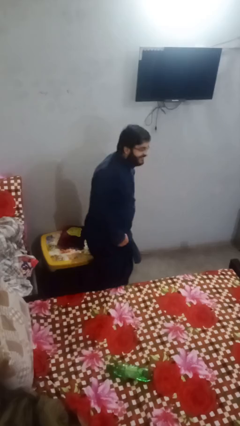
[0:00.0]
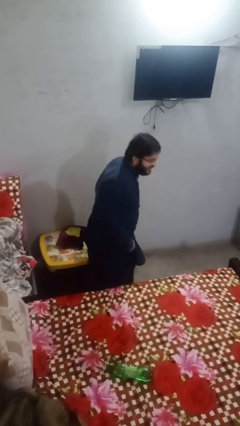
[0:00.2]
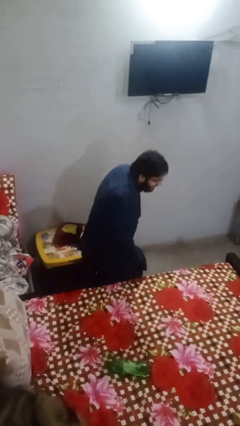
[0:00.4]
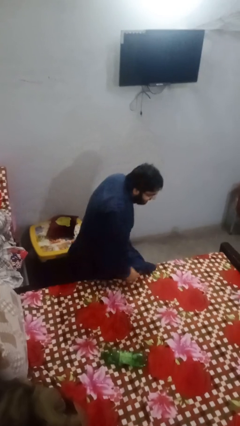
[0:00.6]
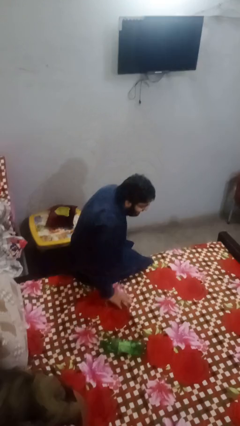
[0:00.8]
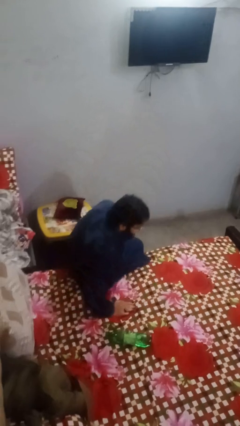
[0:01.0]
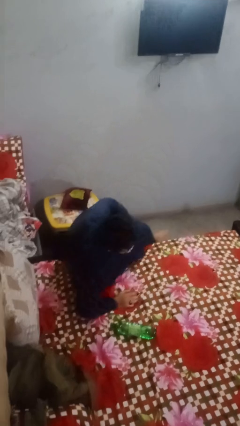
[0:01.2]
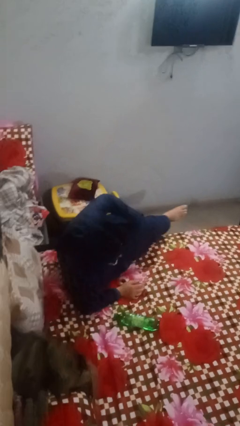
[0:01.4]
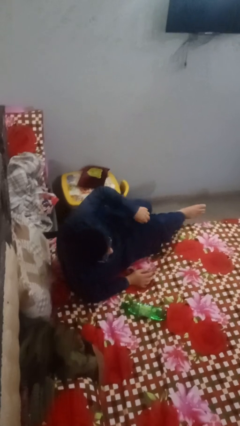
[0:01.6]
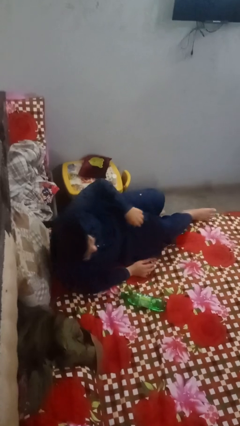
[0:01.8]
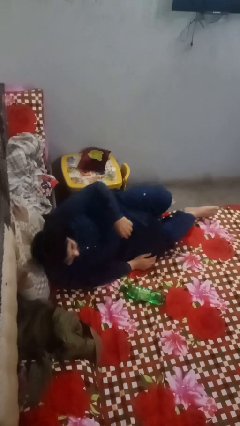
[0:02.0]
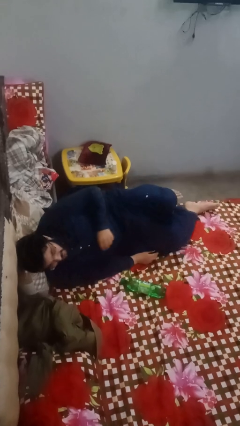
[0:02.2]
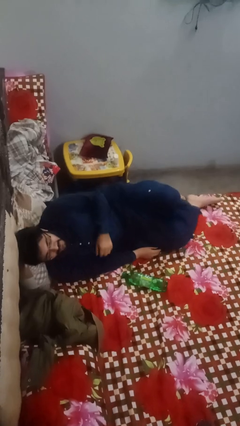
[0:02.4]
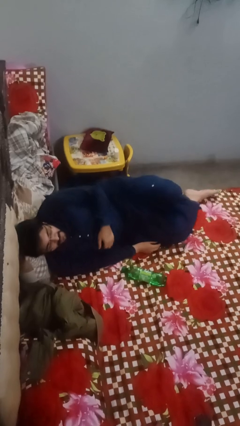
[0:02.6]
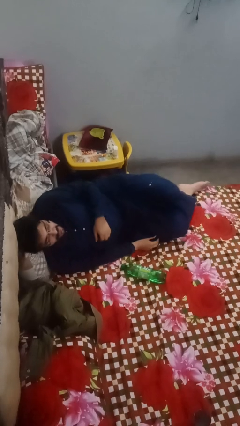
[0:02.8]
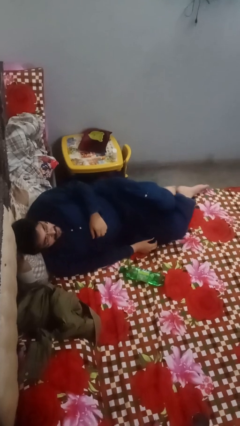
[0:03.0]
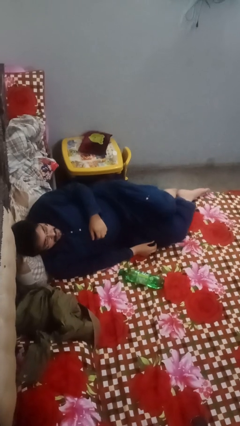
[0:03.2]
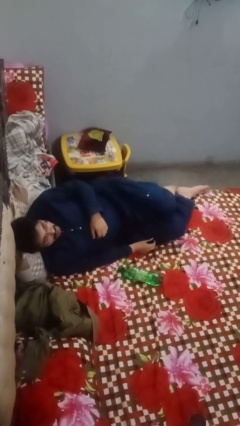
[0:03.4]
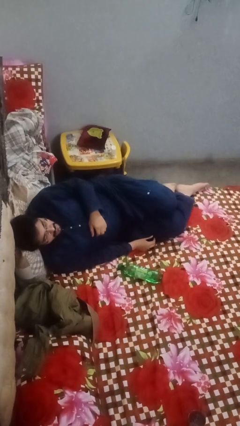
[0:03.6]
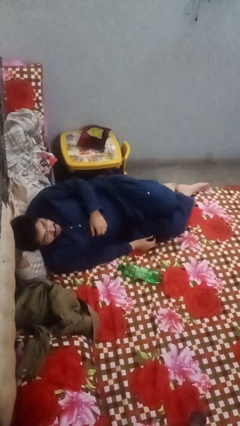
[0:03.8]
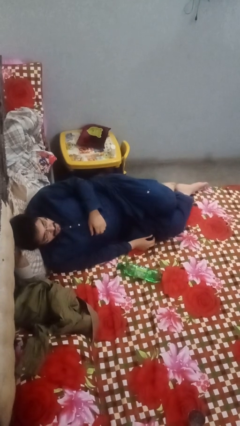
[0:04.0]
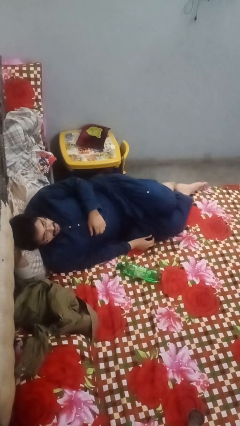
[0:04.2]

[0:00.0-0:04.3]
person lies down on bed

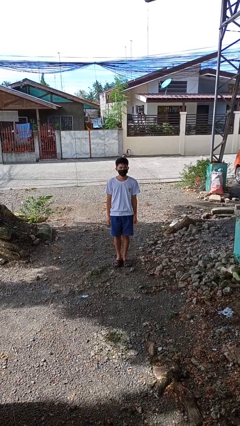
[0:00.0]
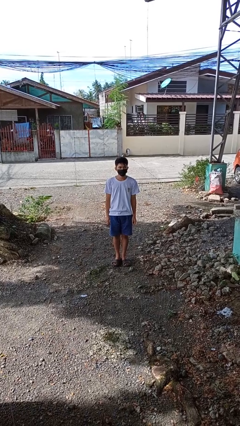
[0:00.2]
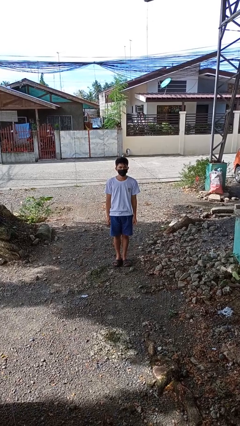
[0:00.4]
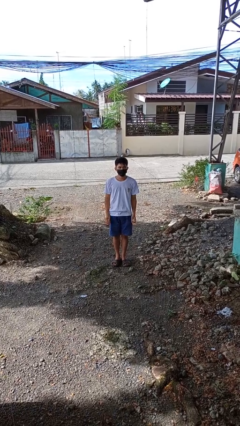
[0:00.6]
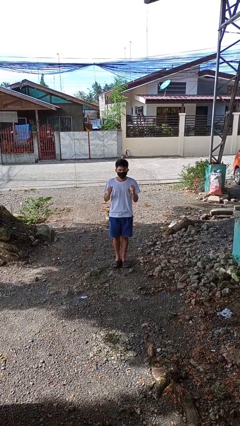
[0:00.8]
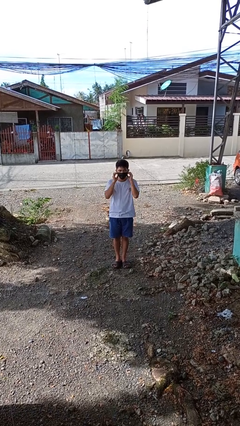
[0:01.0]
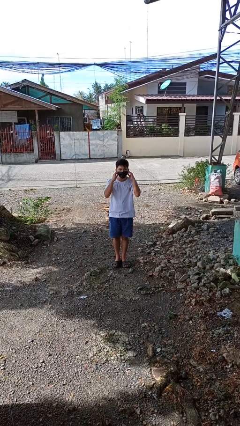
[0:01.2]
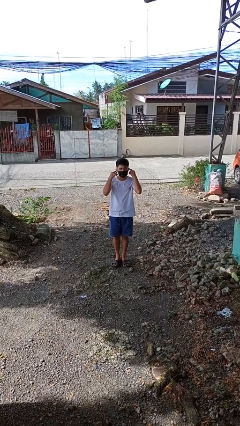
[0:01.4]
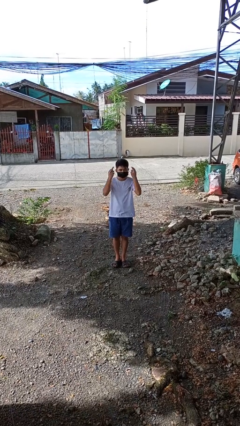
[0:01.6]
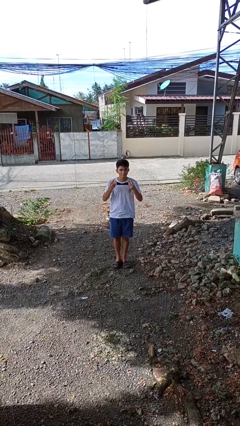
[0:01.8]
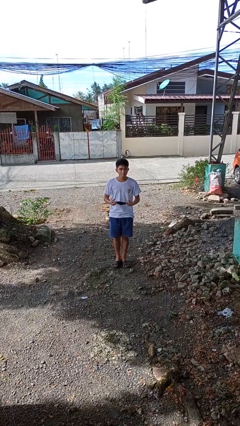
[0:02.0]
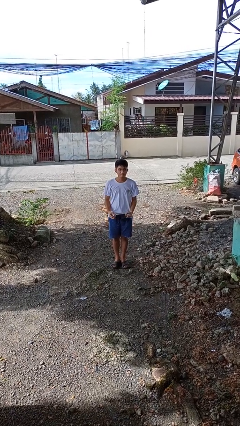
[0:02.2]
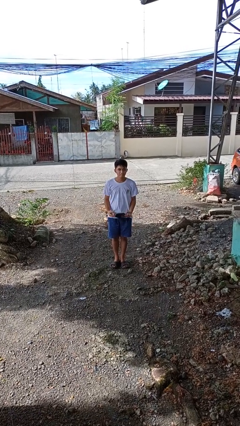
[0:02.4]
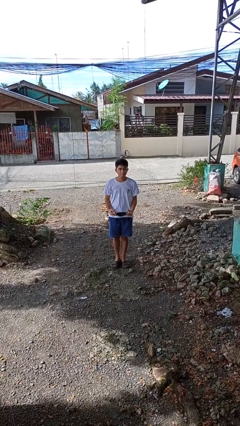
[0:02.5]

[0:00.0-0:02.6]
person takes off facemask

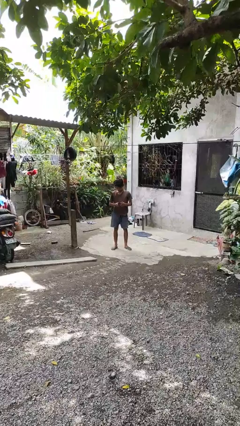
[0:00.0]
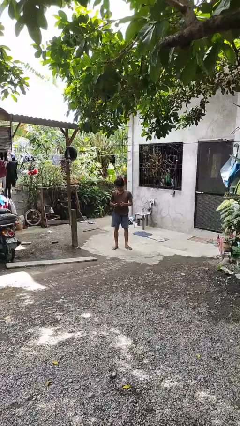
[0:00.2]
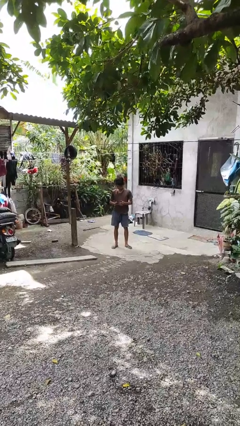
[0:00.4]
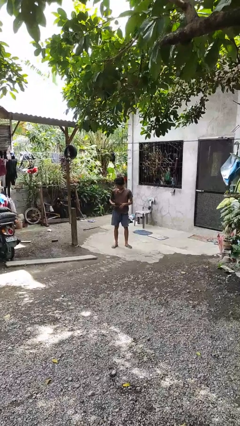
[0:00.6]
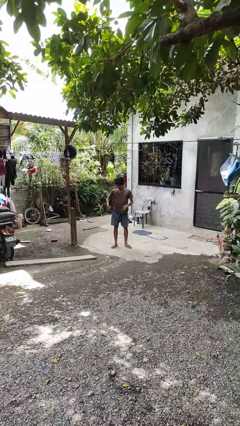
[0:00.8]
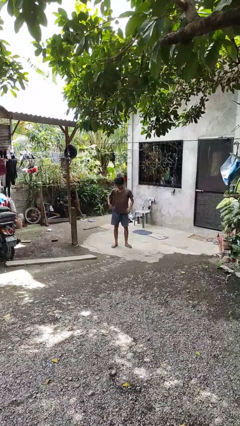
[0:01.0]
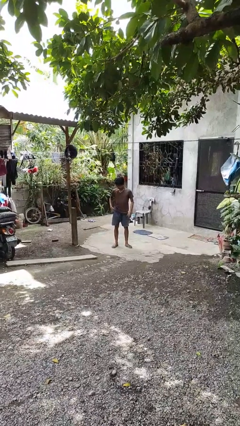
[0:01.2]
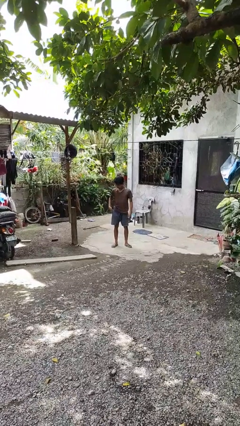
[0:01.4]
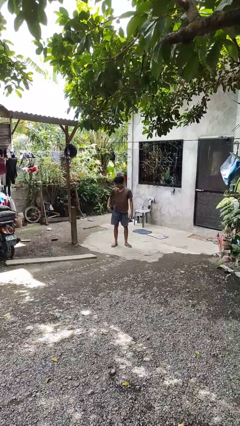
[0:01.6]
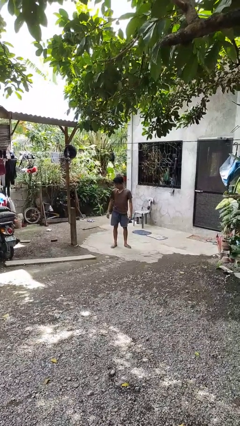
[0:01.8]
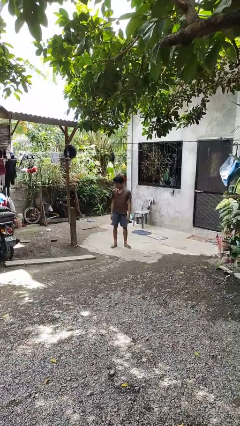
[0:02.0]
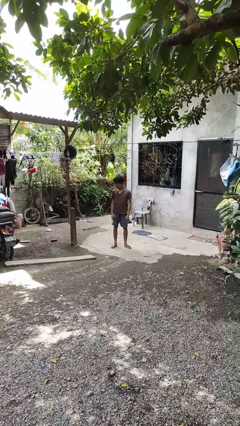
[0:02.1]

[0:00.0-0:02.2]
person puts phone into pocket

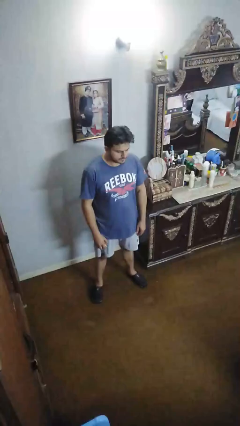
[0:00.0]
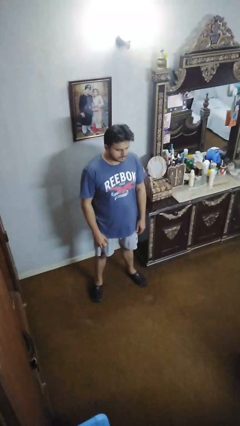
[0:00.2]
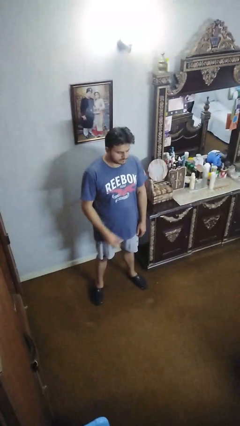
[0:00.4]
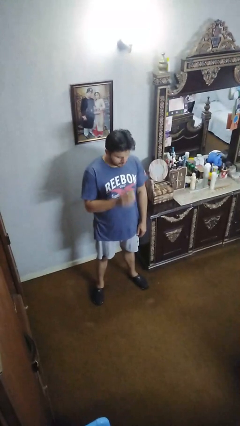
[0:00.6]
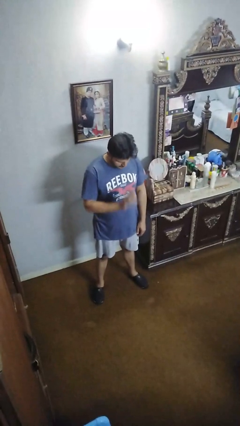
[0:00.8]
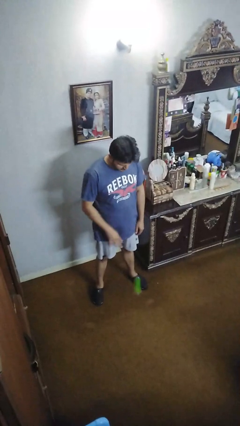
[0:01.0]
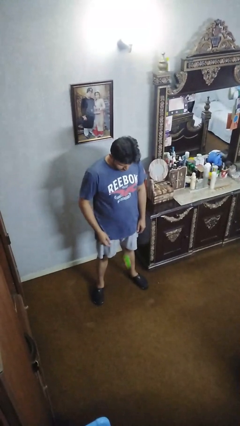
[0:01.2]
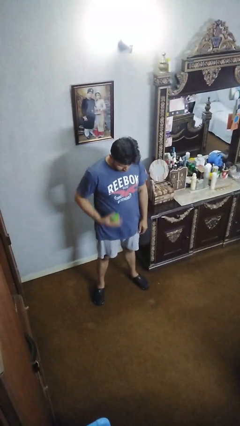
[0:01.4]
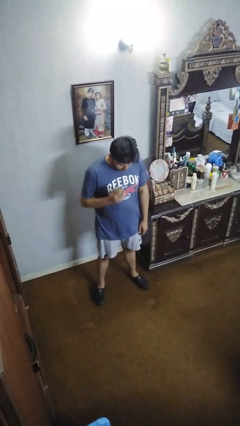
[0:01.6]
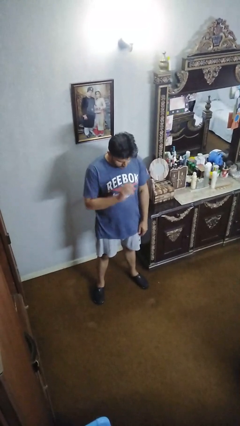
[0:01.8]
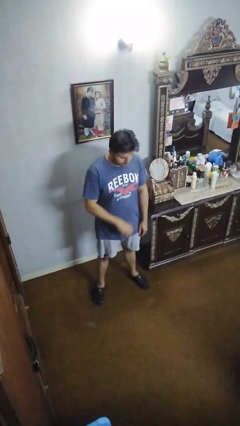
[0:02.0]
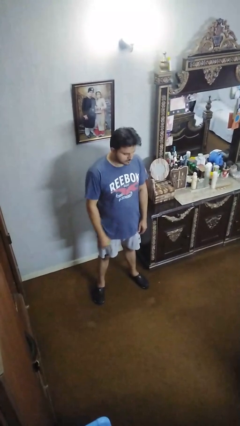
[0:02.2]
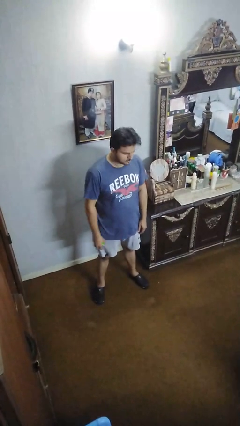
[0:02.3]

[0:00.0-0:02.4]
person bounces ball on floor

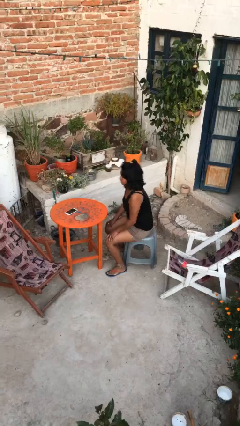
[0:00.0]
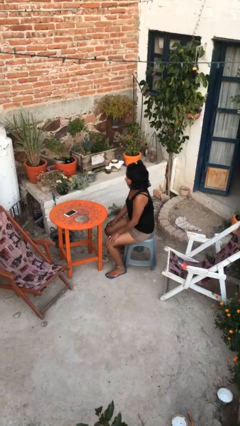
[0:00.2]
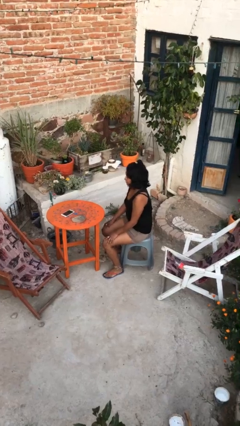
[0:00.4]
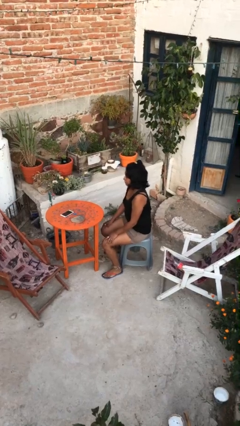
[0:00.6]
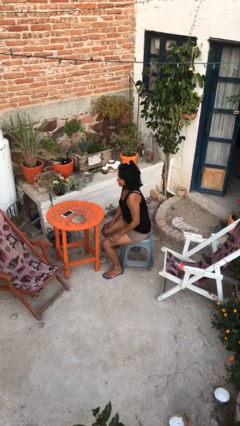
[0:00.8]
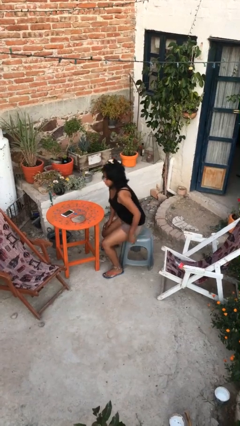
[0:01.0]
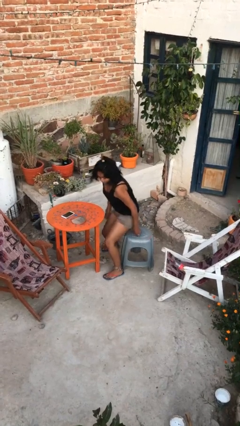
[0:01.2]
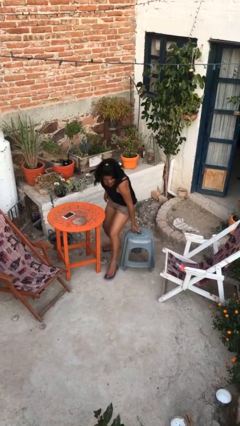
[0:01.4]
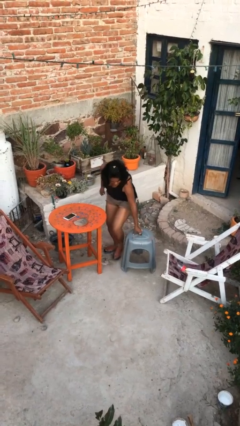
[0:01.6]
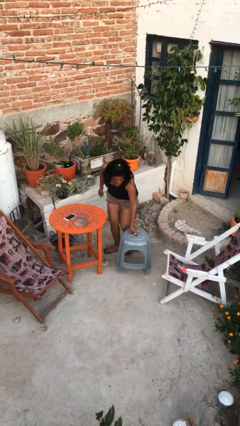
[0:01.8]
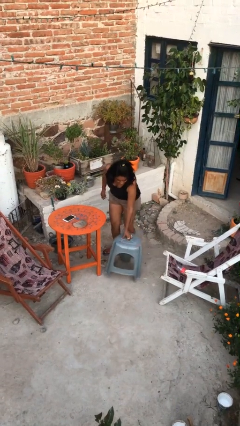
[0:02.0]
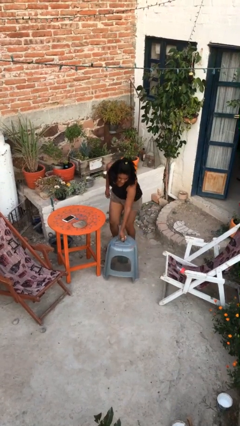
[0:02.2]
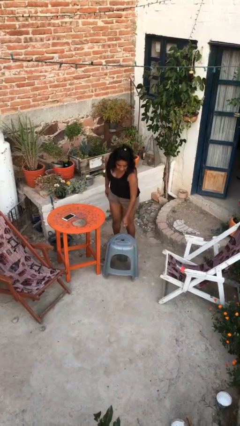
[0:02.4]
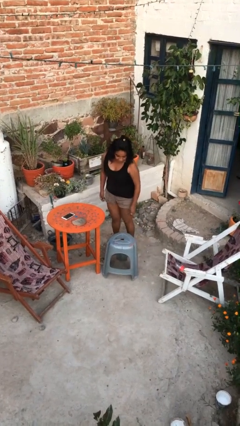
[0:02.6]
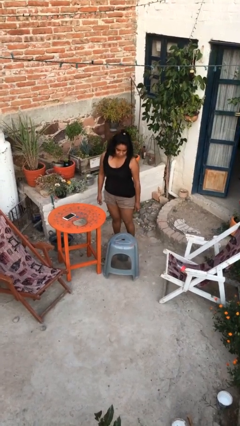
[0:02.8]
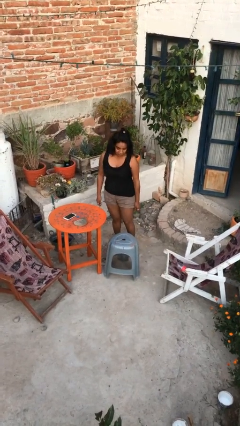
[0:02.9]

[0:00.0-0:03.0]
person stands up

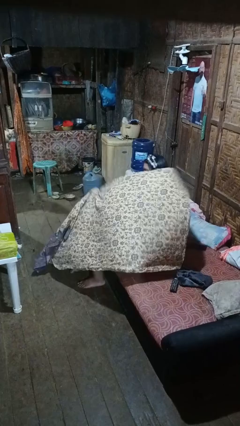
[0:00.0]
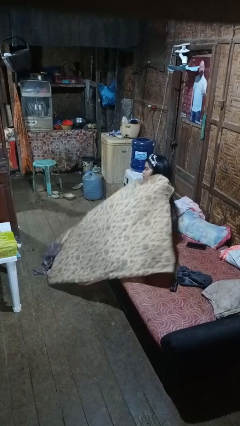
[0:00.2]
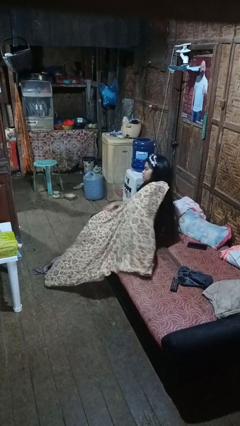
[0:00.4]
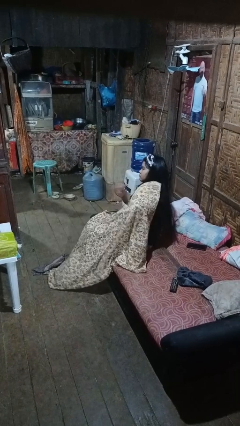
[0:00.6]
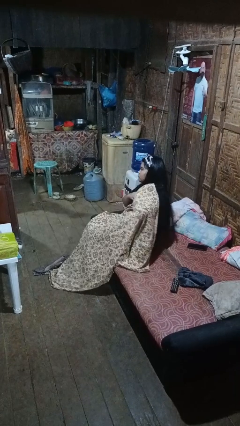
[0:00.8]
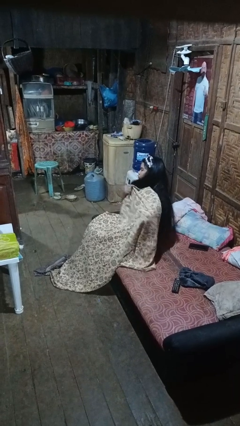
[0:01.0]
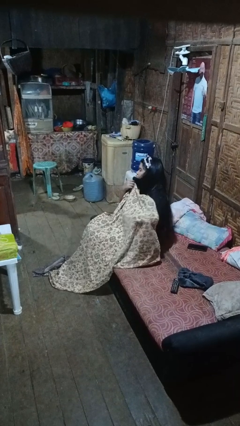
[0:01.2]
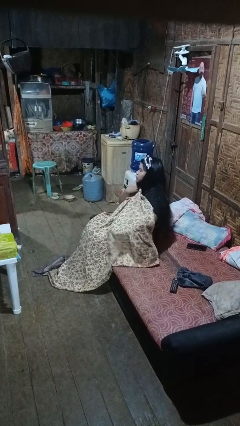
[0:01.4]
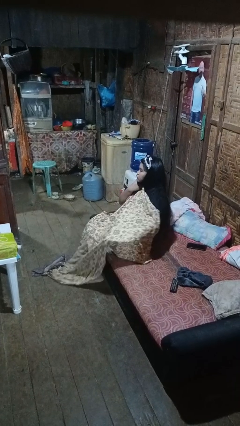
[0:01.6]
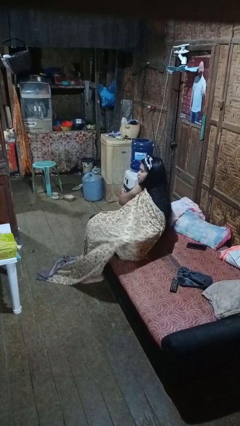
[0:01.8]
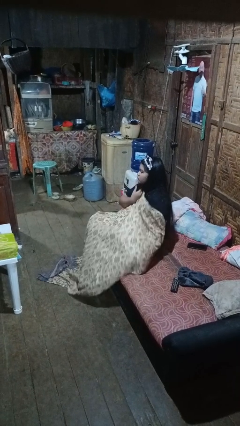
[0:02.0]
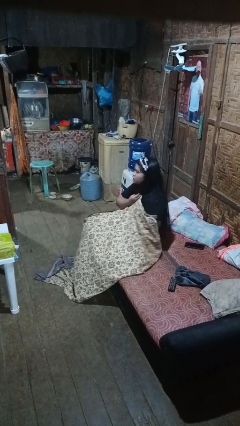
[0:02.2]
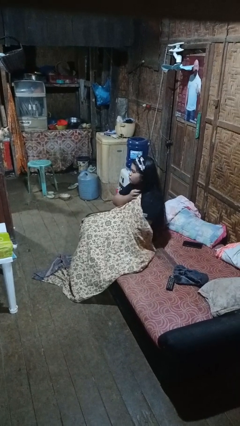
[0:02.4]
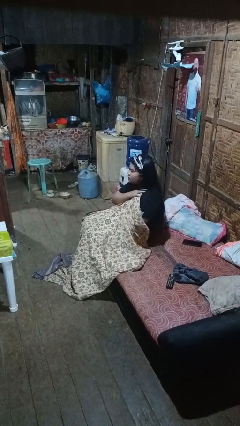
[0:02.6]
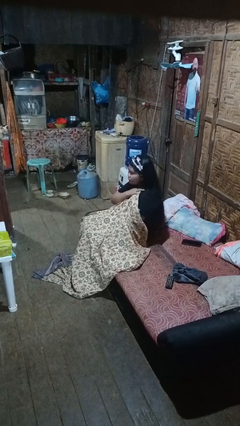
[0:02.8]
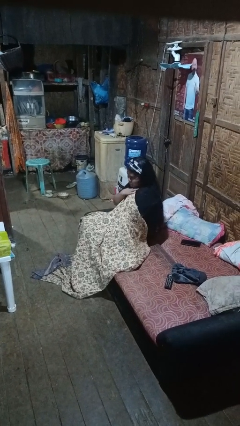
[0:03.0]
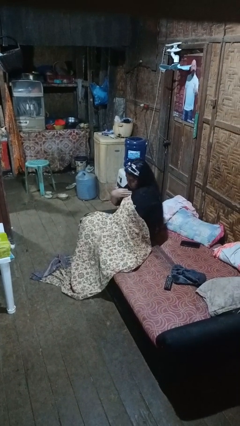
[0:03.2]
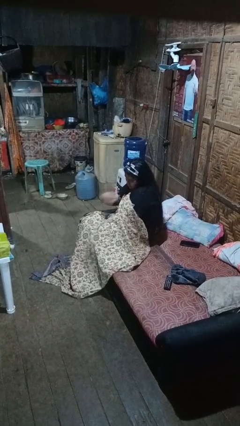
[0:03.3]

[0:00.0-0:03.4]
person covers with blanket
